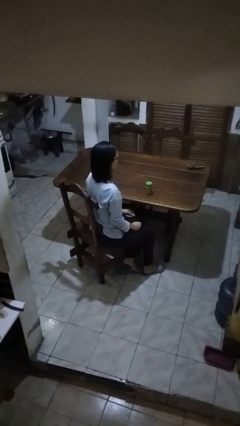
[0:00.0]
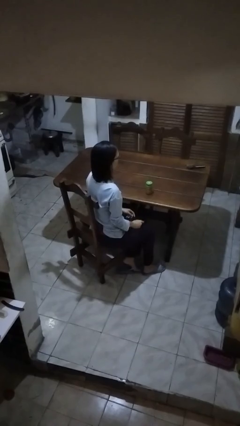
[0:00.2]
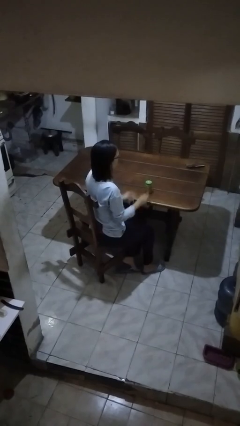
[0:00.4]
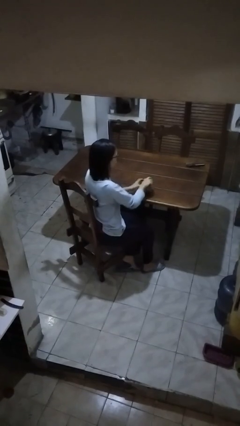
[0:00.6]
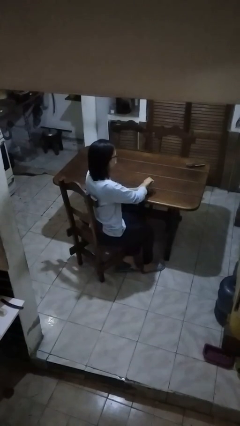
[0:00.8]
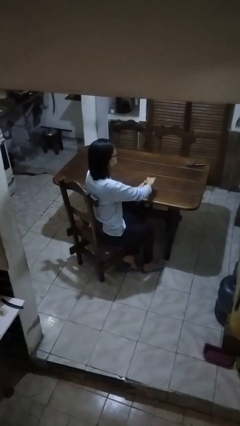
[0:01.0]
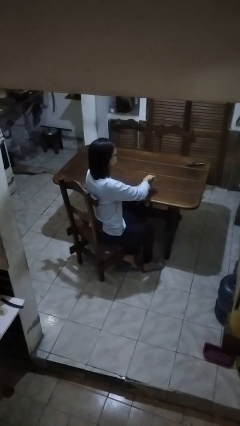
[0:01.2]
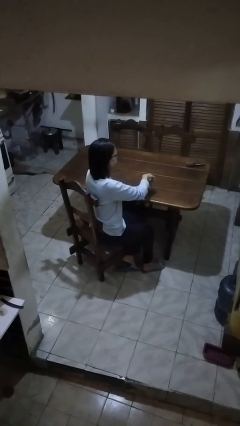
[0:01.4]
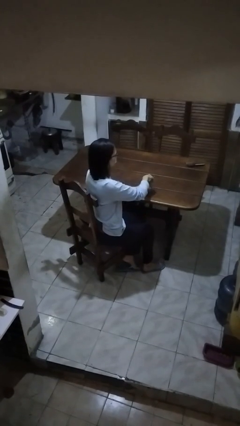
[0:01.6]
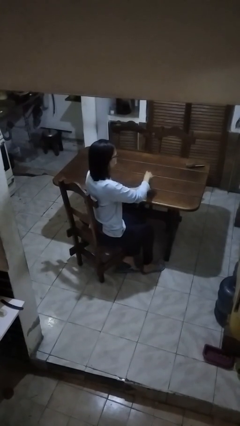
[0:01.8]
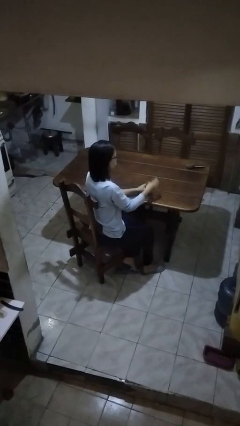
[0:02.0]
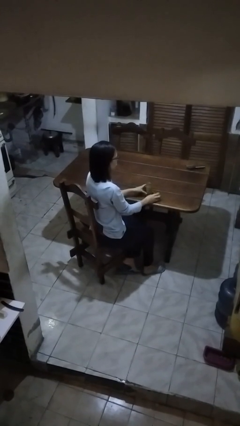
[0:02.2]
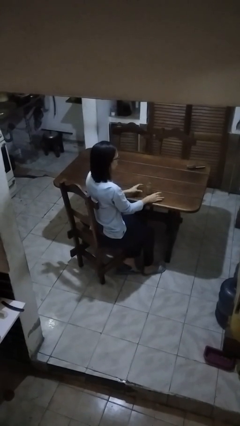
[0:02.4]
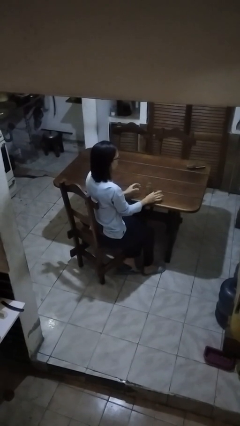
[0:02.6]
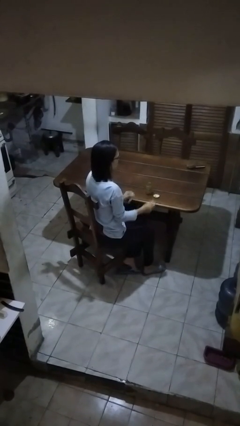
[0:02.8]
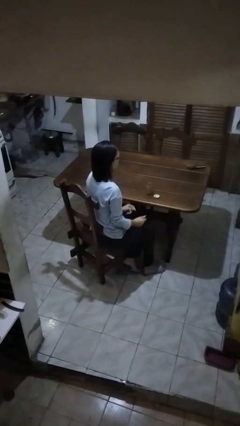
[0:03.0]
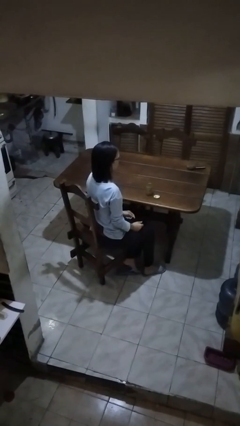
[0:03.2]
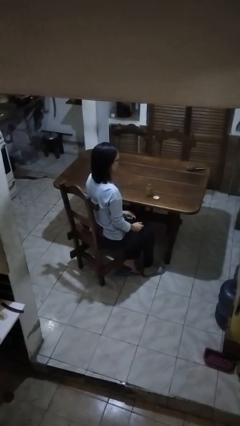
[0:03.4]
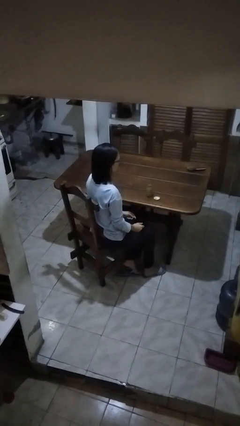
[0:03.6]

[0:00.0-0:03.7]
person opens jar

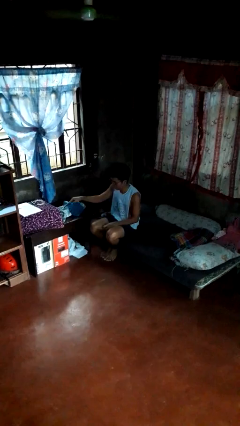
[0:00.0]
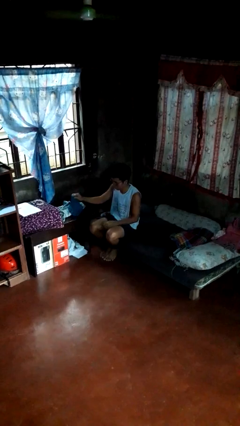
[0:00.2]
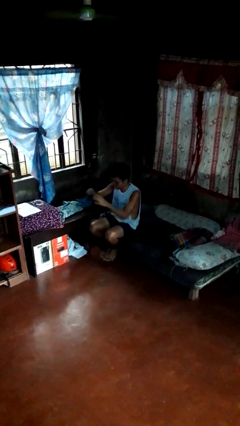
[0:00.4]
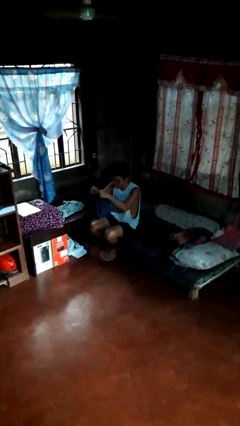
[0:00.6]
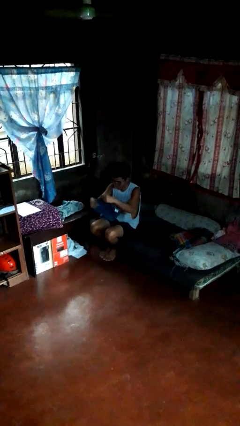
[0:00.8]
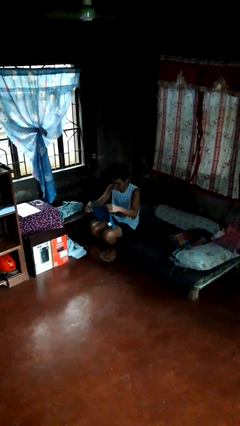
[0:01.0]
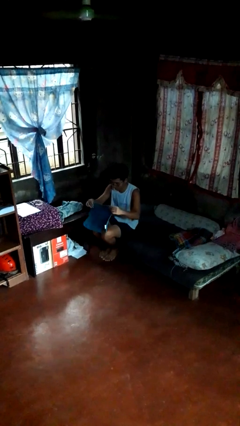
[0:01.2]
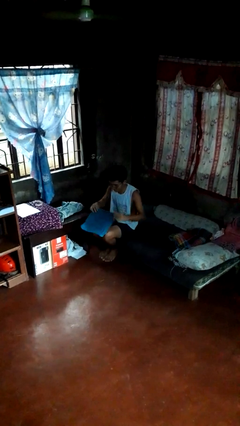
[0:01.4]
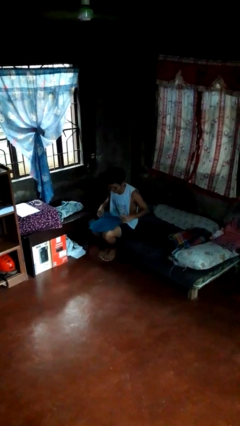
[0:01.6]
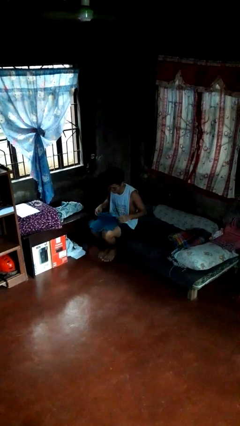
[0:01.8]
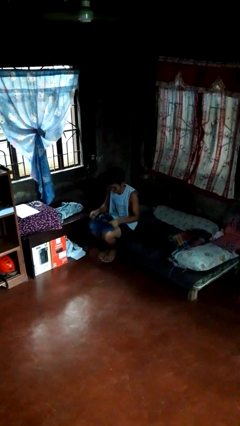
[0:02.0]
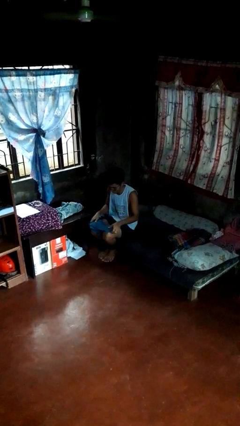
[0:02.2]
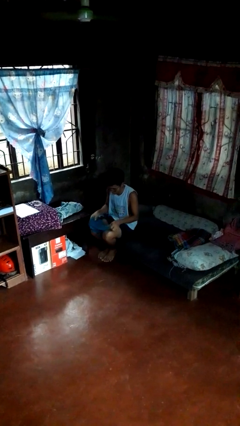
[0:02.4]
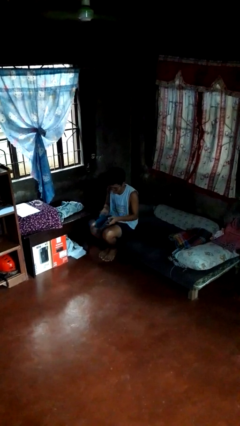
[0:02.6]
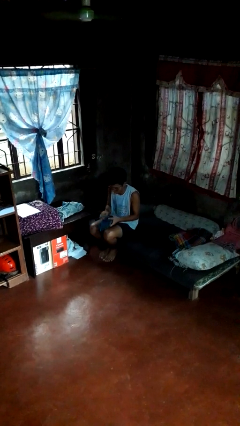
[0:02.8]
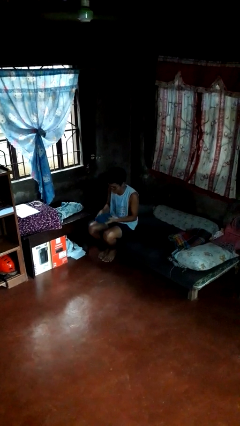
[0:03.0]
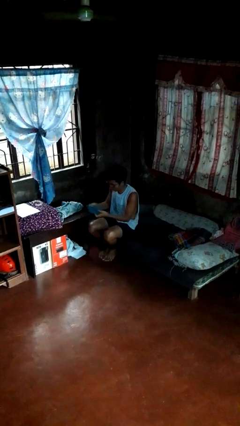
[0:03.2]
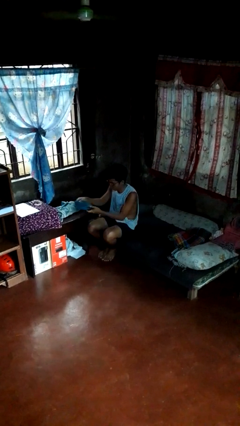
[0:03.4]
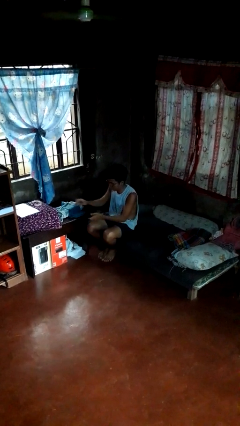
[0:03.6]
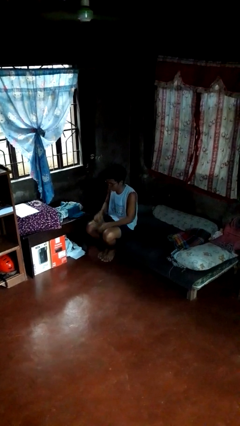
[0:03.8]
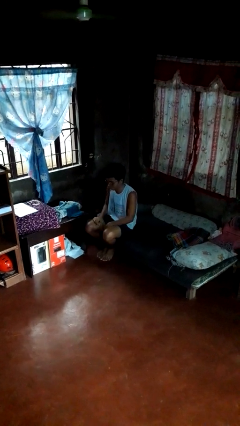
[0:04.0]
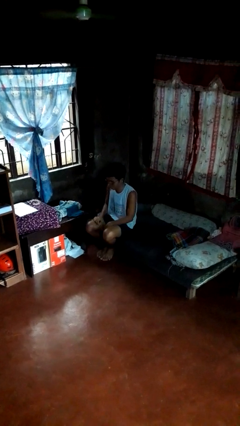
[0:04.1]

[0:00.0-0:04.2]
person folds towel

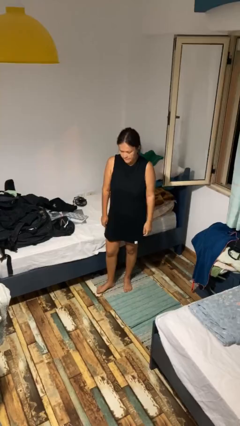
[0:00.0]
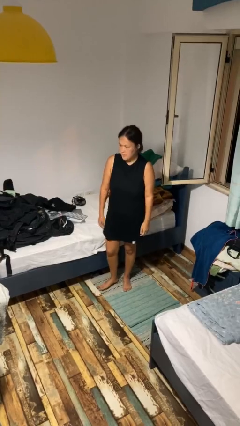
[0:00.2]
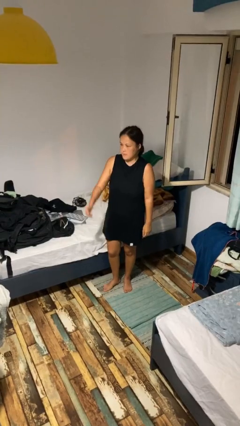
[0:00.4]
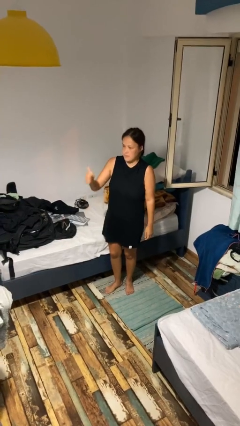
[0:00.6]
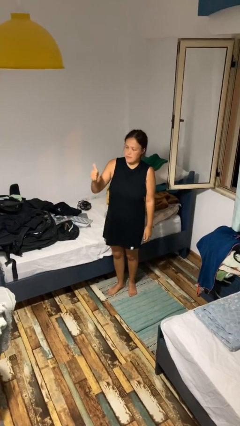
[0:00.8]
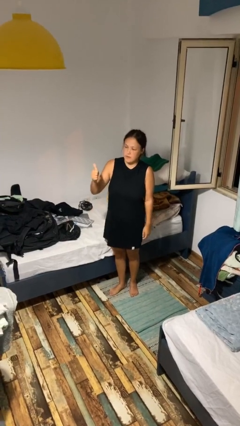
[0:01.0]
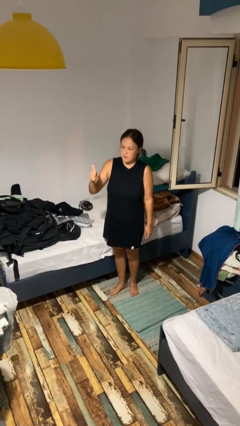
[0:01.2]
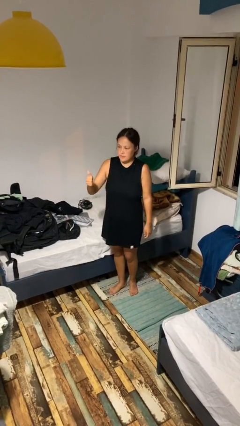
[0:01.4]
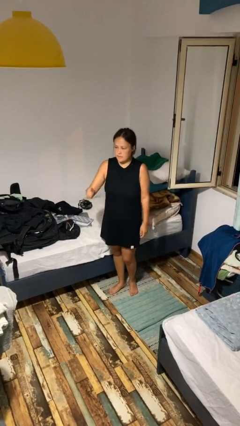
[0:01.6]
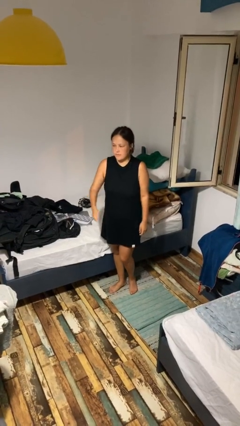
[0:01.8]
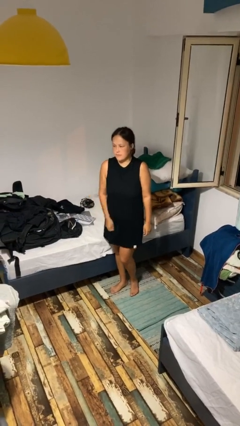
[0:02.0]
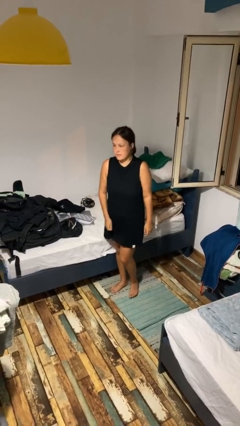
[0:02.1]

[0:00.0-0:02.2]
person gestures thumbs up

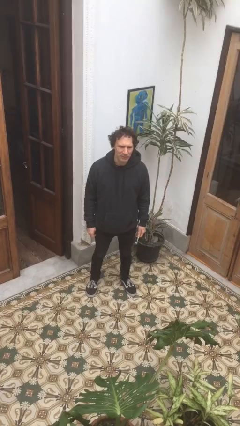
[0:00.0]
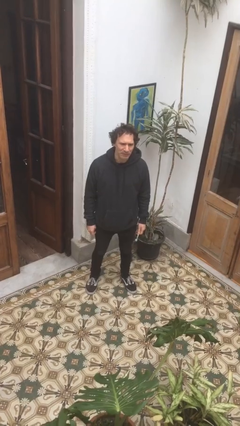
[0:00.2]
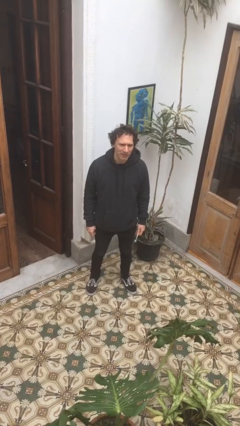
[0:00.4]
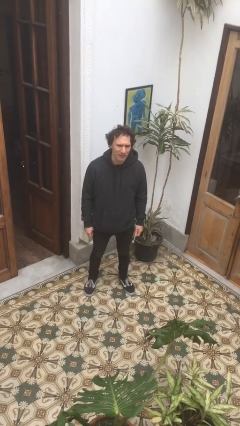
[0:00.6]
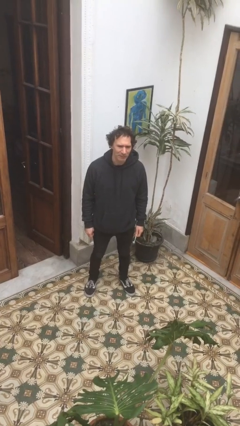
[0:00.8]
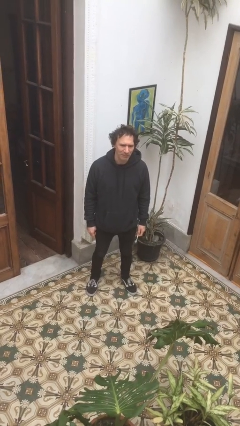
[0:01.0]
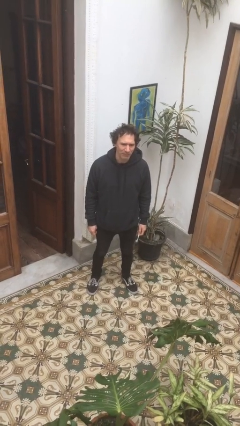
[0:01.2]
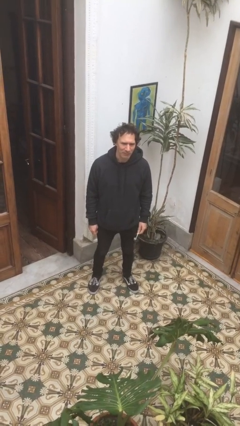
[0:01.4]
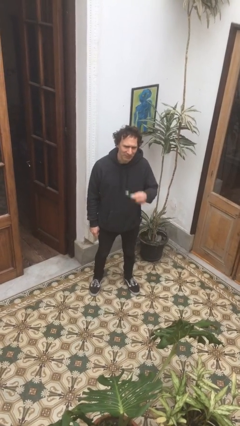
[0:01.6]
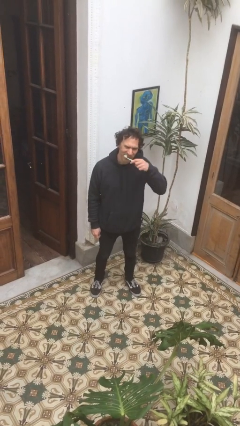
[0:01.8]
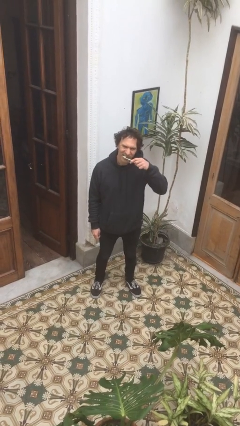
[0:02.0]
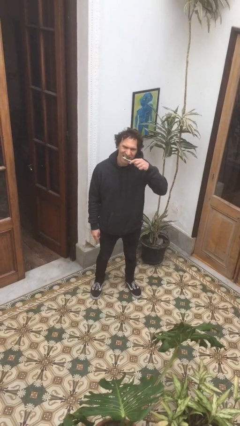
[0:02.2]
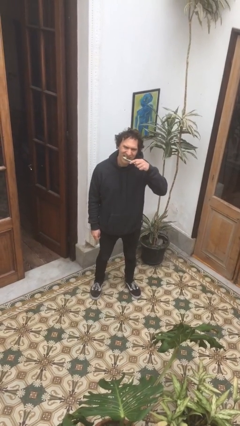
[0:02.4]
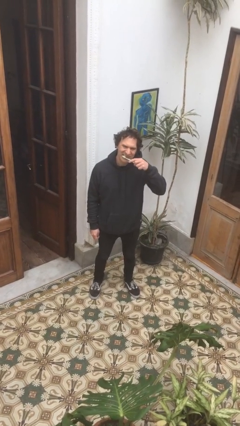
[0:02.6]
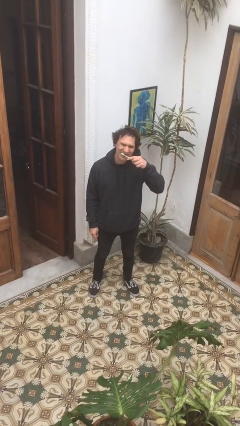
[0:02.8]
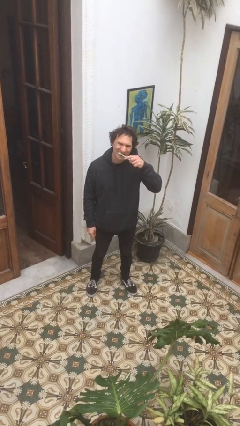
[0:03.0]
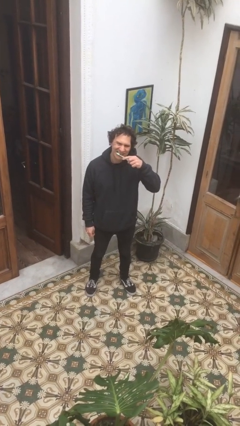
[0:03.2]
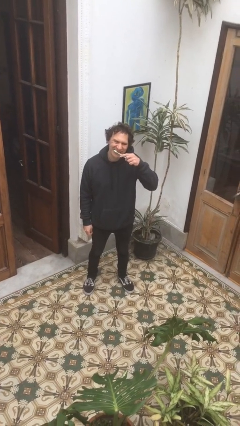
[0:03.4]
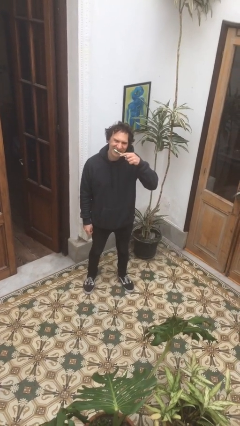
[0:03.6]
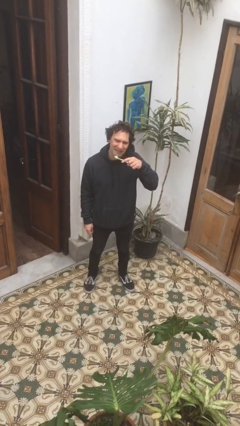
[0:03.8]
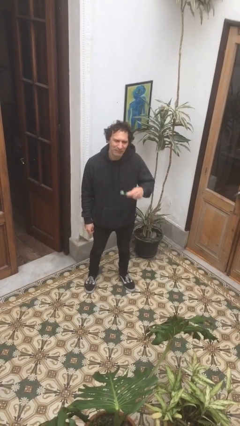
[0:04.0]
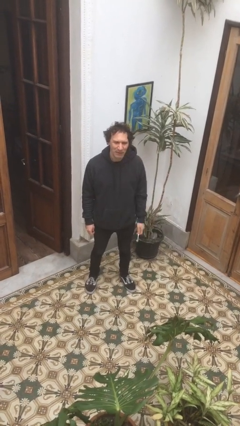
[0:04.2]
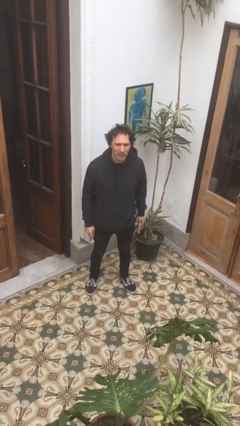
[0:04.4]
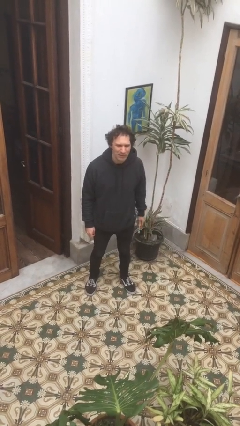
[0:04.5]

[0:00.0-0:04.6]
person brushes teeth

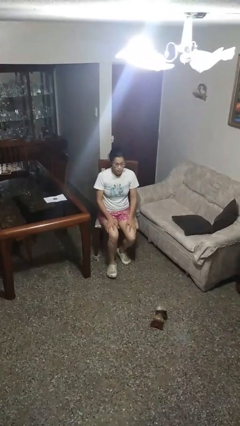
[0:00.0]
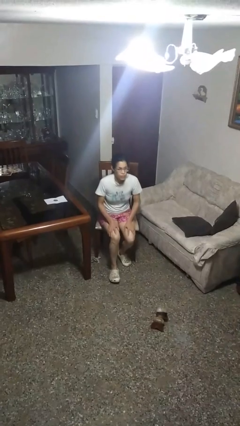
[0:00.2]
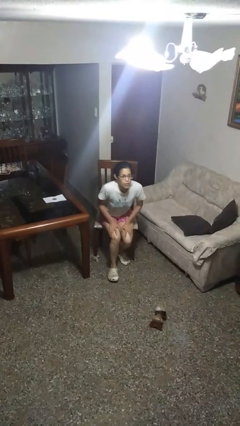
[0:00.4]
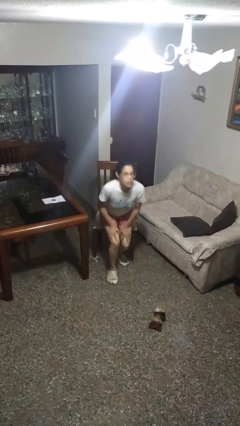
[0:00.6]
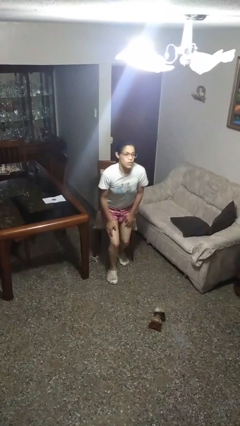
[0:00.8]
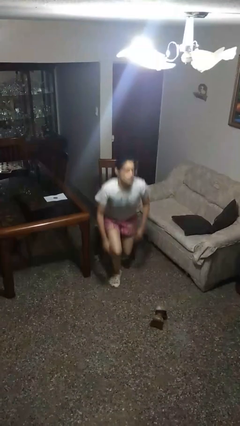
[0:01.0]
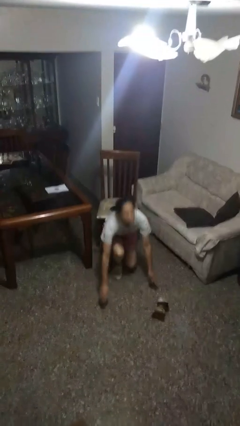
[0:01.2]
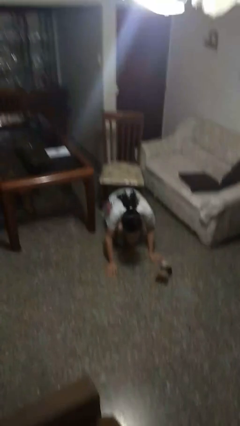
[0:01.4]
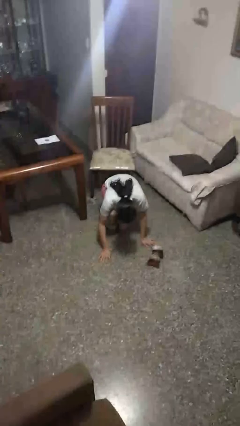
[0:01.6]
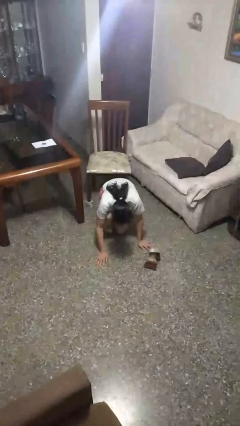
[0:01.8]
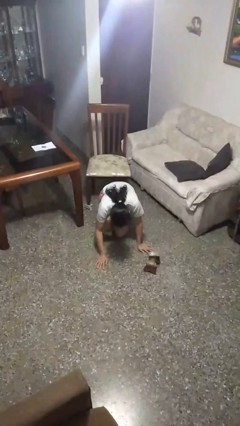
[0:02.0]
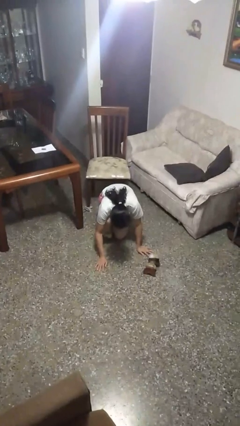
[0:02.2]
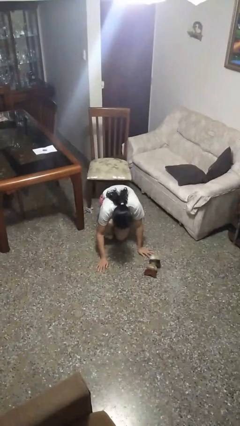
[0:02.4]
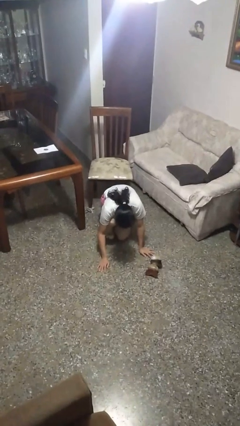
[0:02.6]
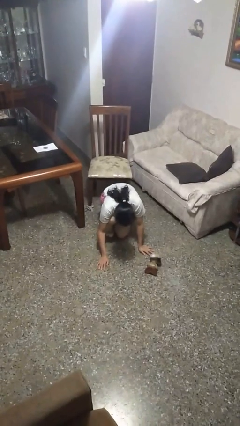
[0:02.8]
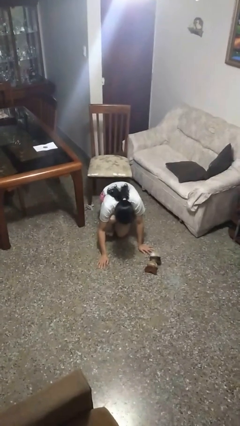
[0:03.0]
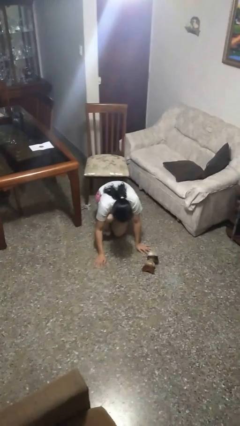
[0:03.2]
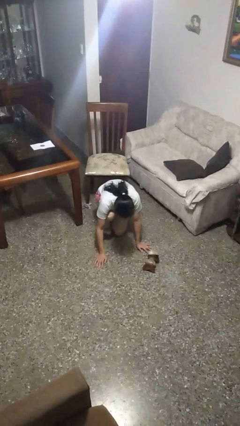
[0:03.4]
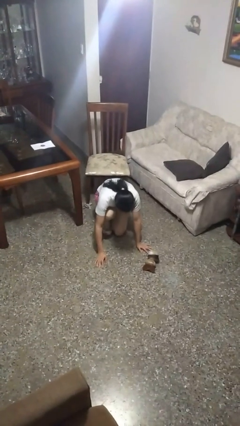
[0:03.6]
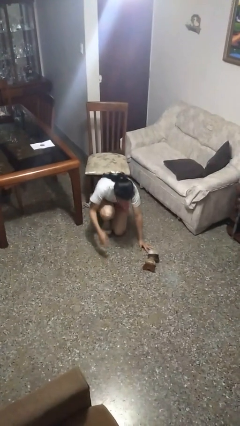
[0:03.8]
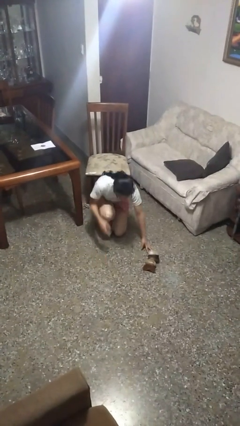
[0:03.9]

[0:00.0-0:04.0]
person falls from chair
